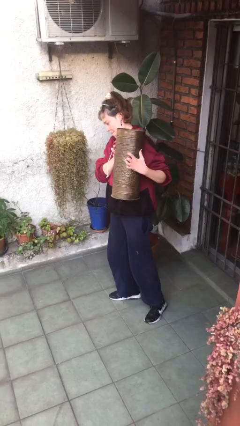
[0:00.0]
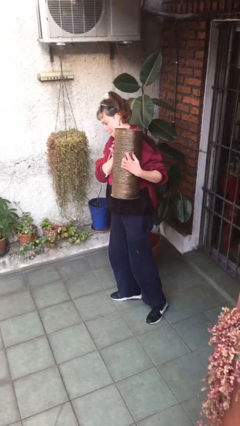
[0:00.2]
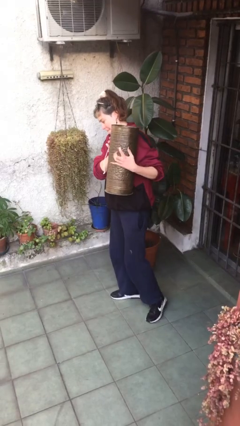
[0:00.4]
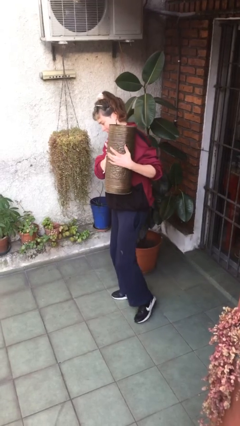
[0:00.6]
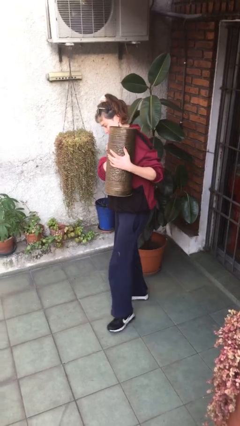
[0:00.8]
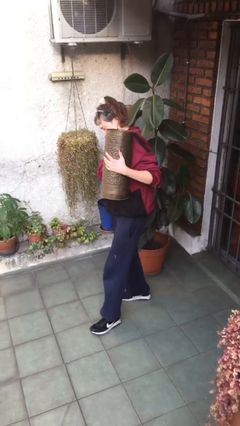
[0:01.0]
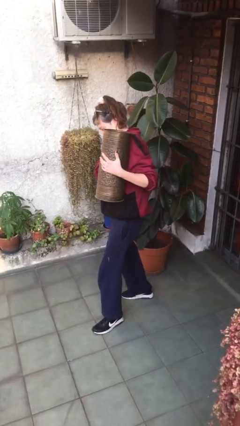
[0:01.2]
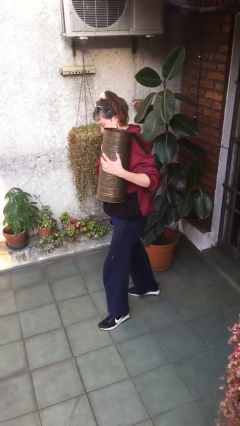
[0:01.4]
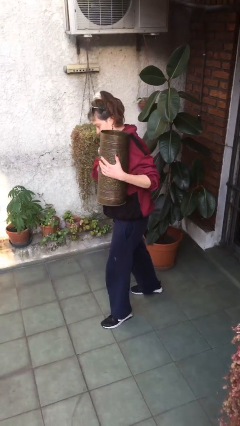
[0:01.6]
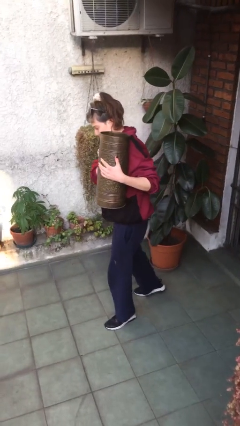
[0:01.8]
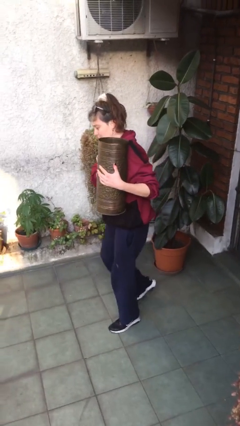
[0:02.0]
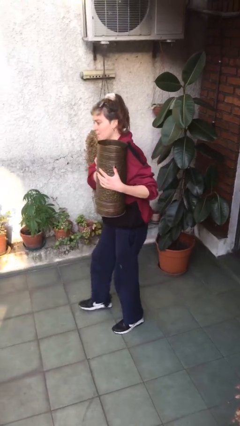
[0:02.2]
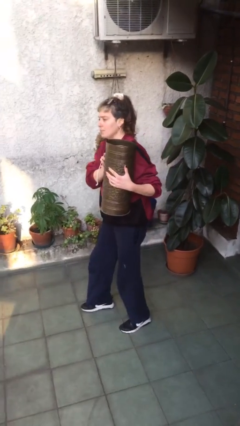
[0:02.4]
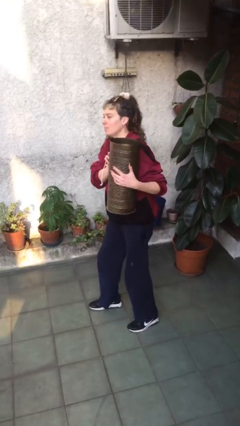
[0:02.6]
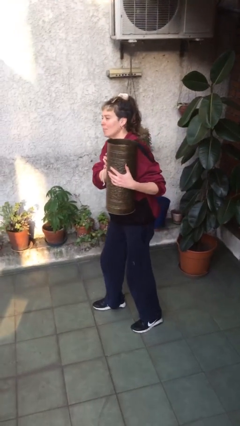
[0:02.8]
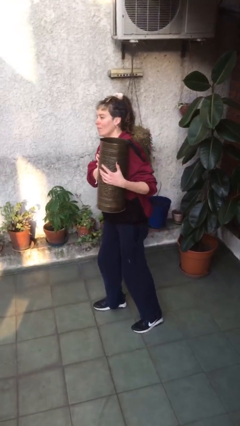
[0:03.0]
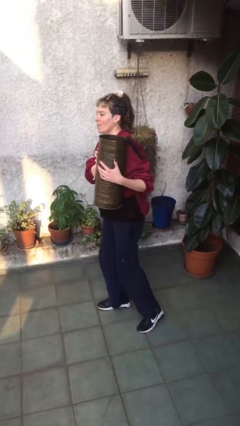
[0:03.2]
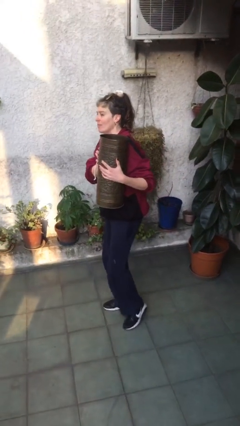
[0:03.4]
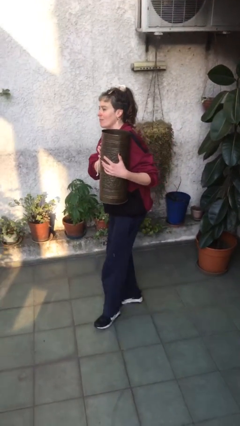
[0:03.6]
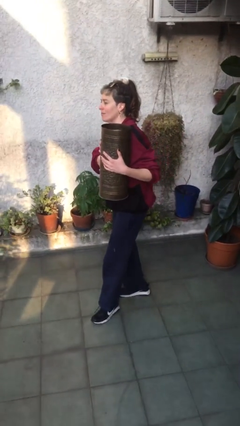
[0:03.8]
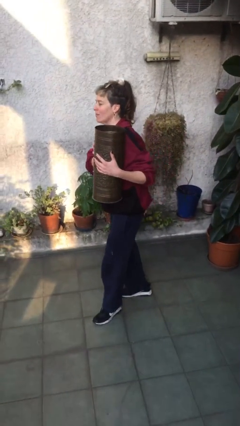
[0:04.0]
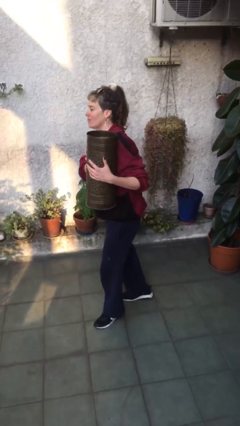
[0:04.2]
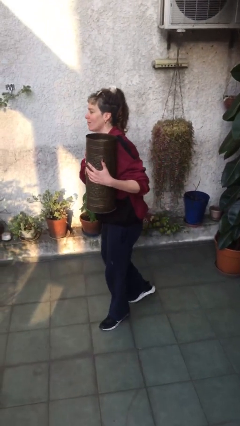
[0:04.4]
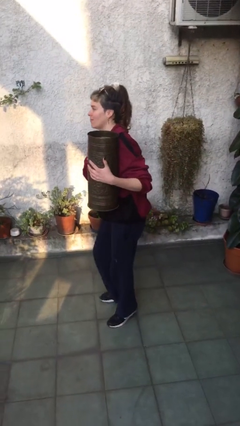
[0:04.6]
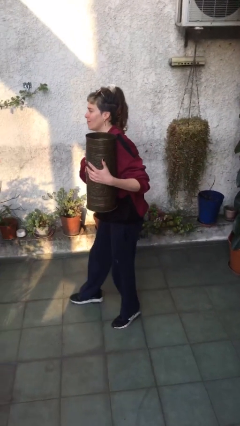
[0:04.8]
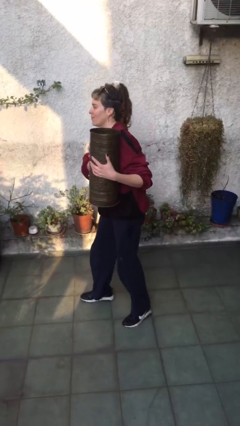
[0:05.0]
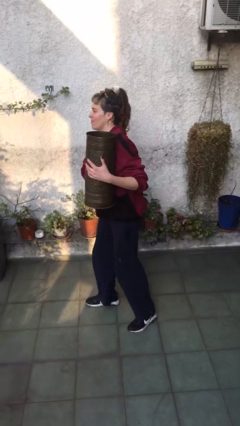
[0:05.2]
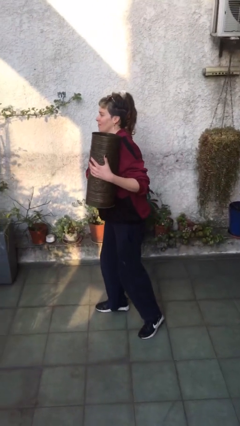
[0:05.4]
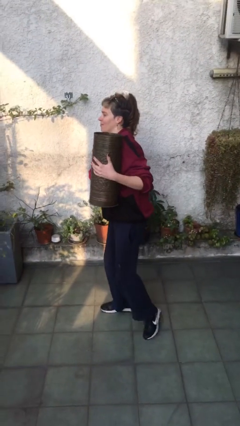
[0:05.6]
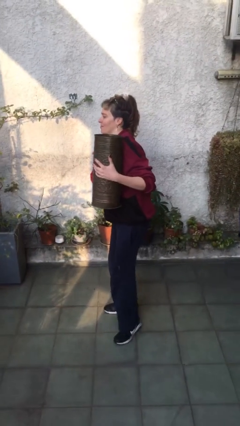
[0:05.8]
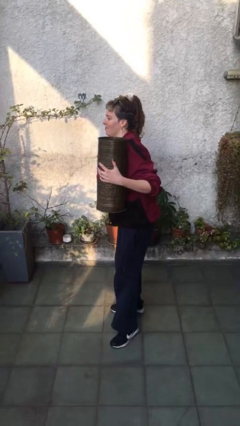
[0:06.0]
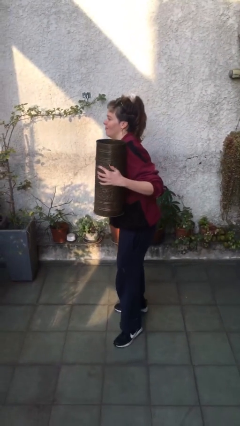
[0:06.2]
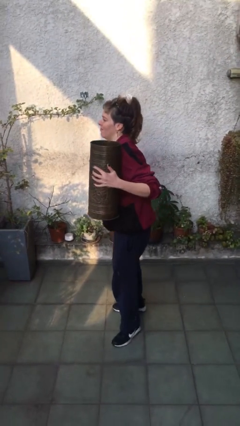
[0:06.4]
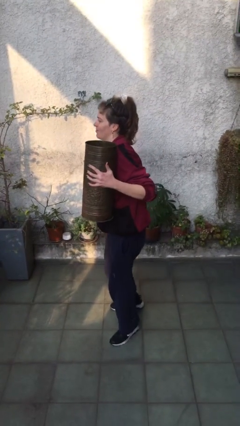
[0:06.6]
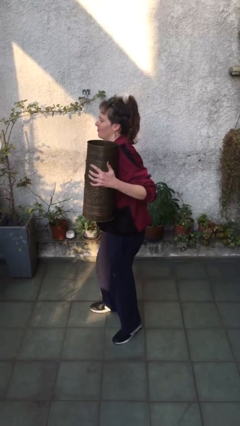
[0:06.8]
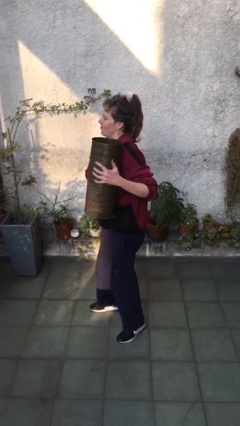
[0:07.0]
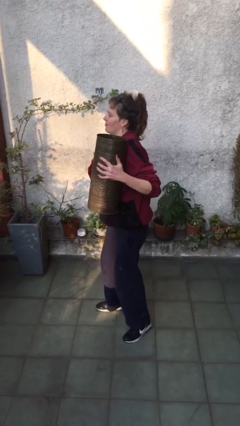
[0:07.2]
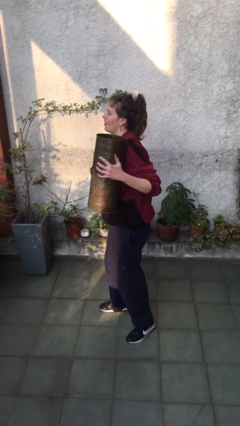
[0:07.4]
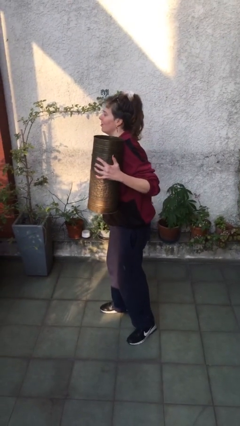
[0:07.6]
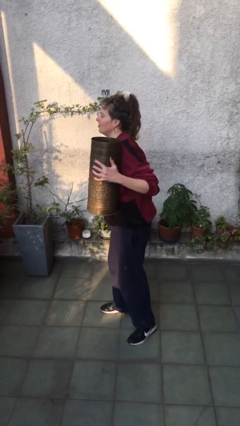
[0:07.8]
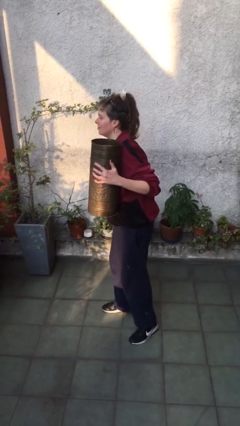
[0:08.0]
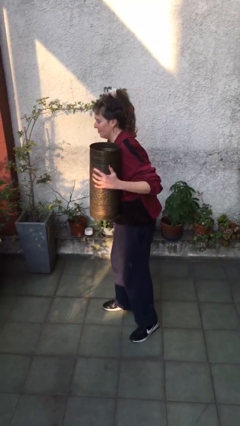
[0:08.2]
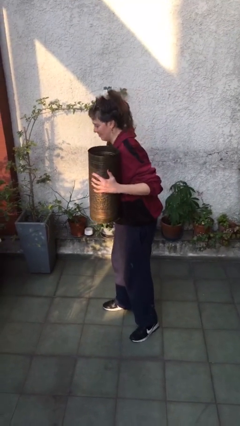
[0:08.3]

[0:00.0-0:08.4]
person carries heavy object

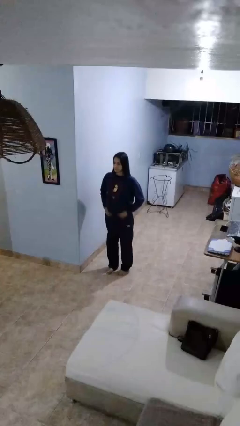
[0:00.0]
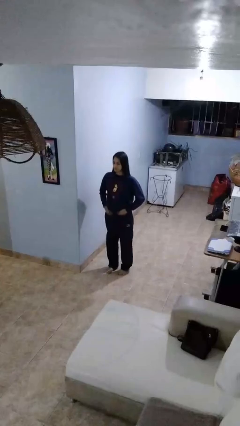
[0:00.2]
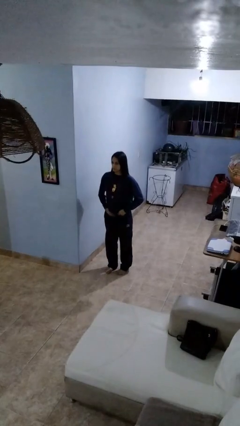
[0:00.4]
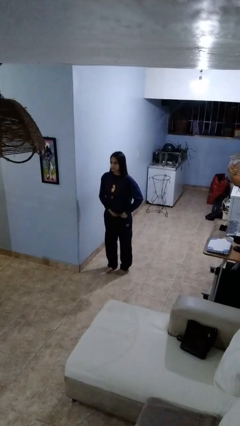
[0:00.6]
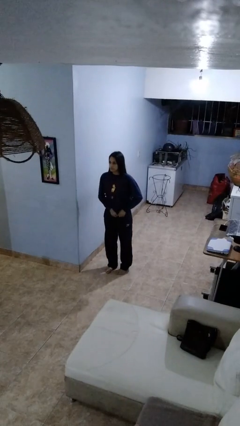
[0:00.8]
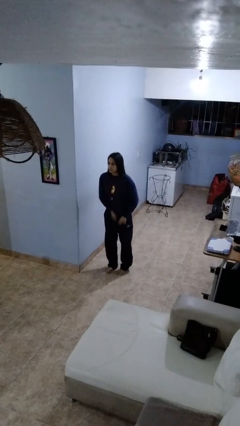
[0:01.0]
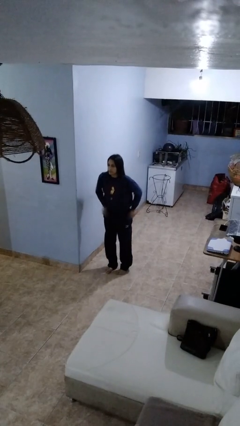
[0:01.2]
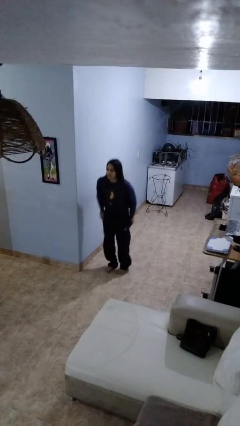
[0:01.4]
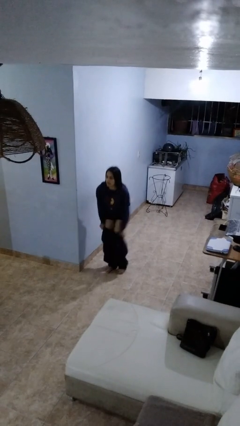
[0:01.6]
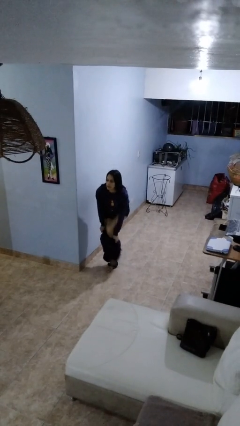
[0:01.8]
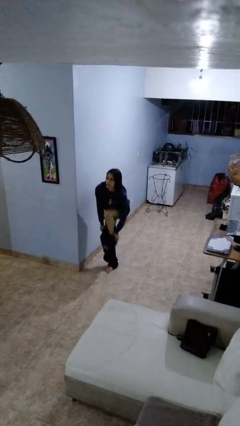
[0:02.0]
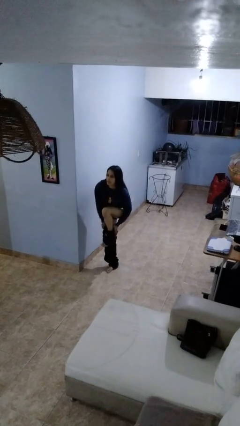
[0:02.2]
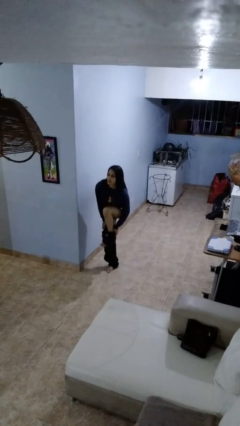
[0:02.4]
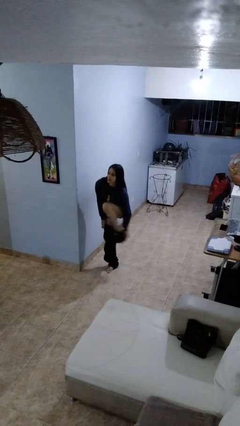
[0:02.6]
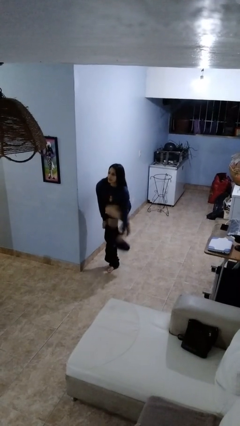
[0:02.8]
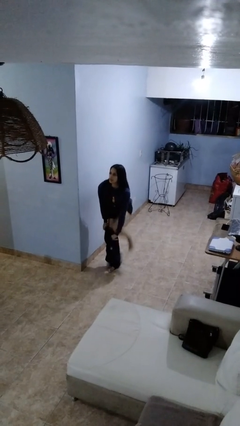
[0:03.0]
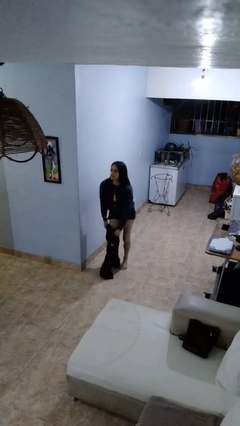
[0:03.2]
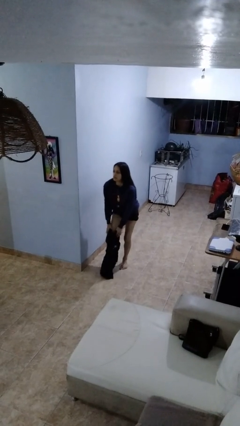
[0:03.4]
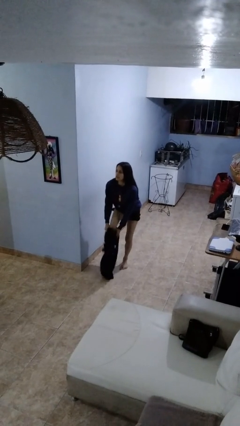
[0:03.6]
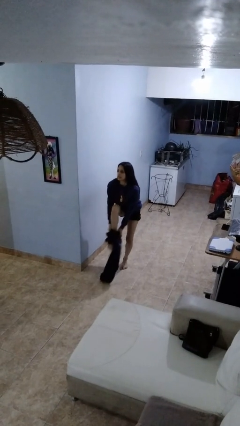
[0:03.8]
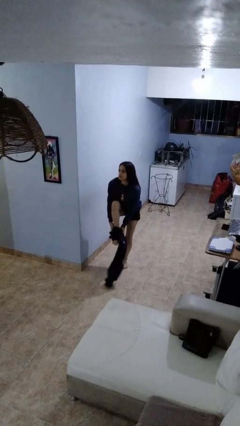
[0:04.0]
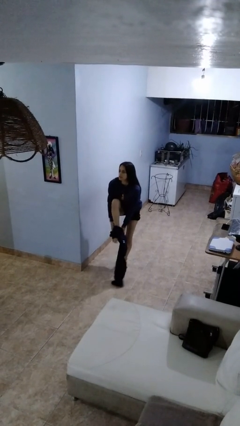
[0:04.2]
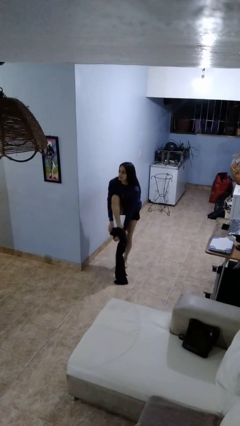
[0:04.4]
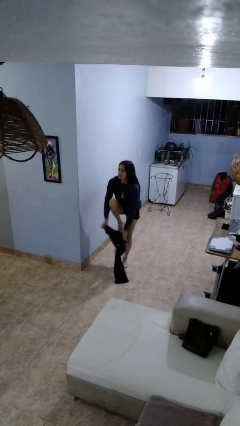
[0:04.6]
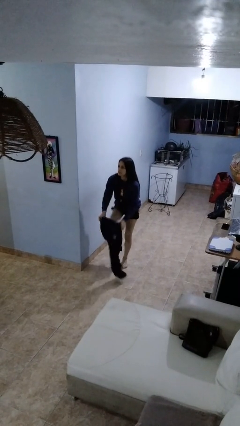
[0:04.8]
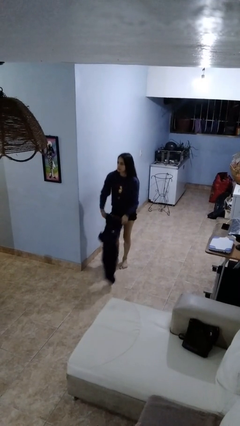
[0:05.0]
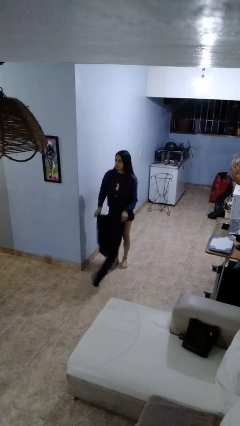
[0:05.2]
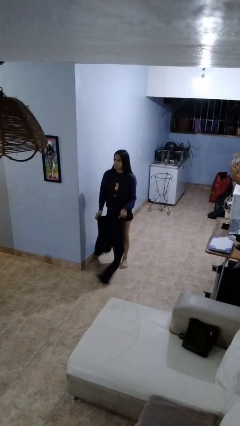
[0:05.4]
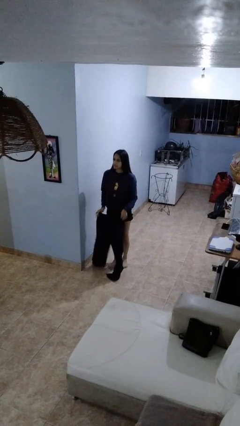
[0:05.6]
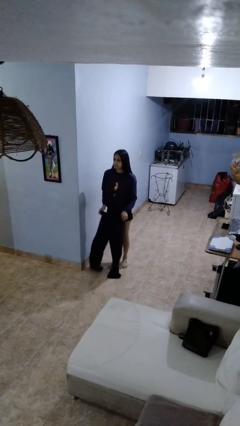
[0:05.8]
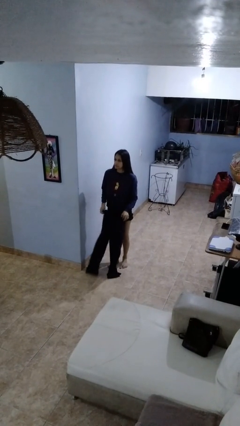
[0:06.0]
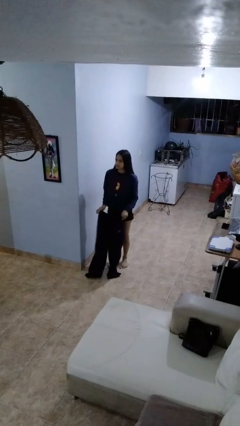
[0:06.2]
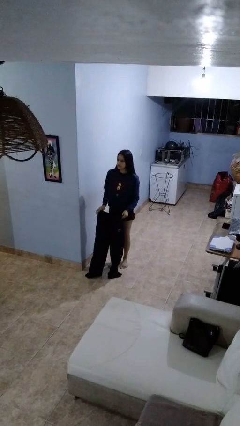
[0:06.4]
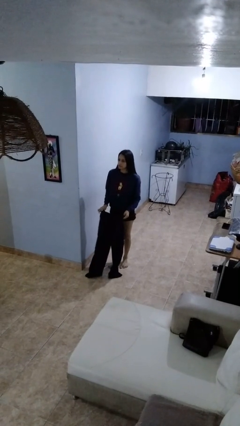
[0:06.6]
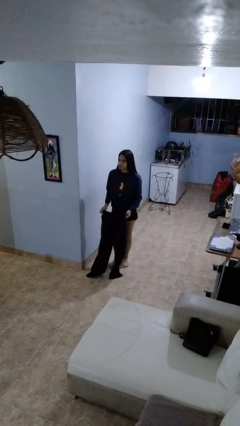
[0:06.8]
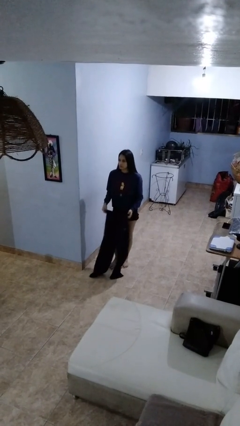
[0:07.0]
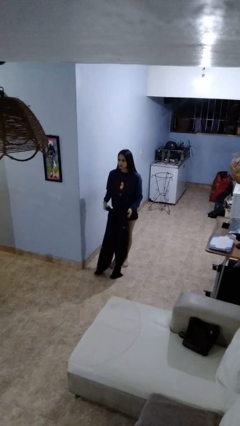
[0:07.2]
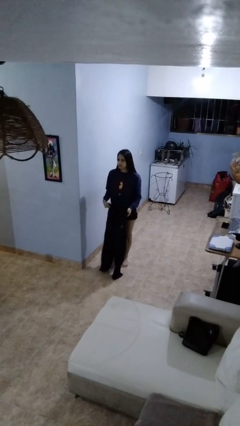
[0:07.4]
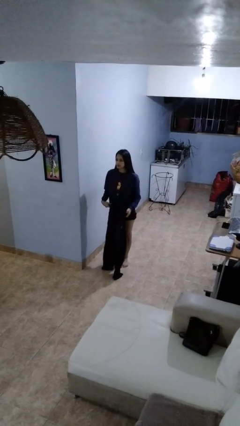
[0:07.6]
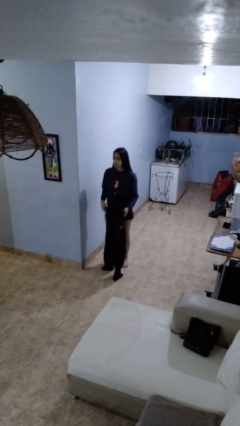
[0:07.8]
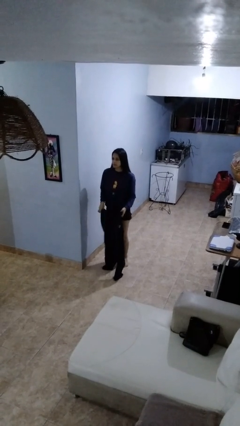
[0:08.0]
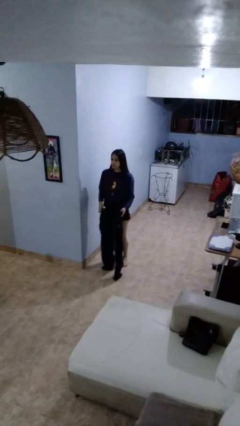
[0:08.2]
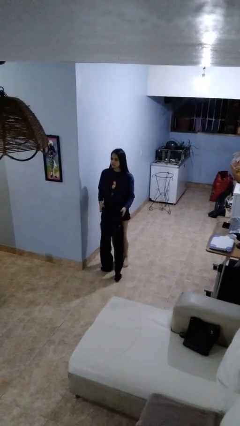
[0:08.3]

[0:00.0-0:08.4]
person takes off pants

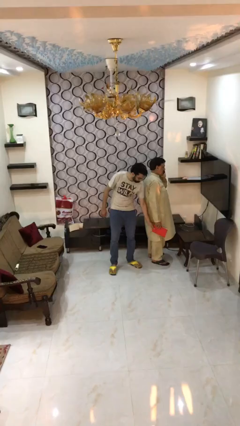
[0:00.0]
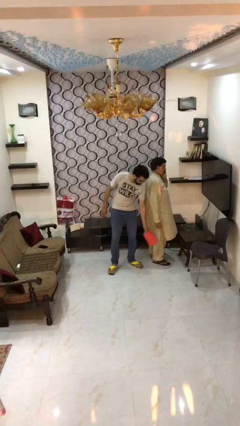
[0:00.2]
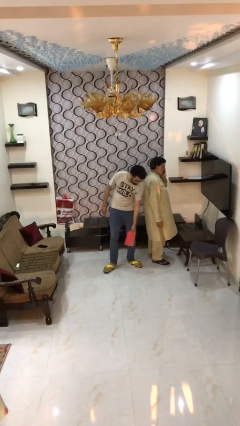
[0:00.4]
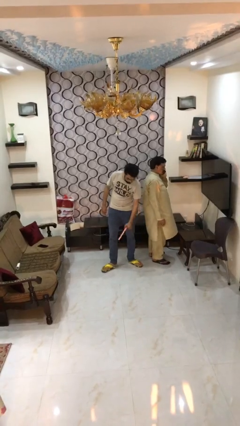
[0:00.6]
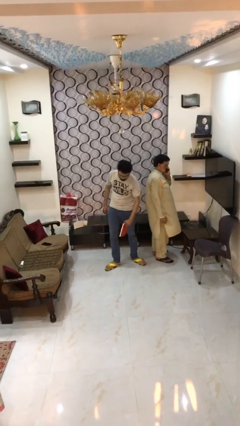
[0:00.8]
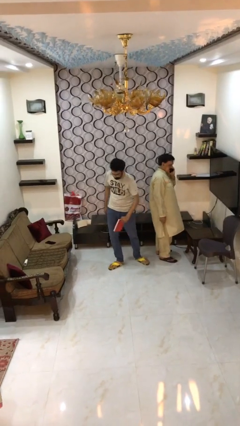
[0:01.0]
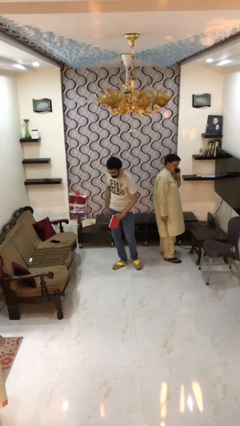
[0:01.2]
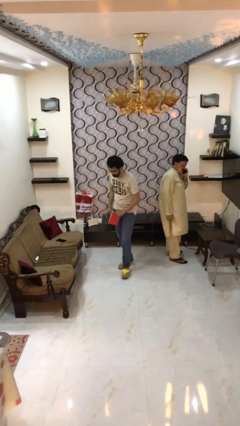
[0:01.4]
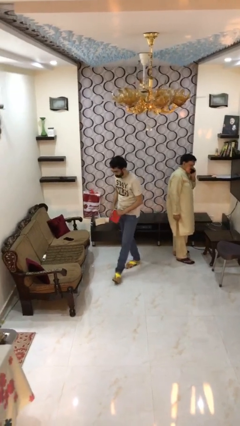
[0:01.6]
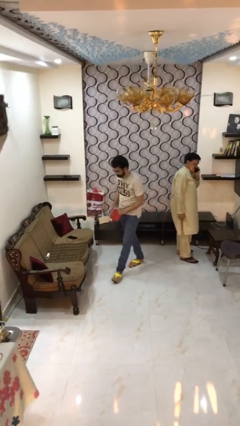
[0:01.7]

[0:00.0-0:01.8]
person steals object from person
